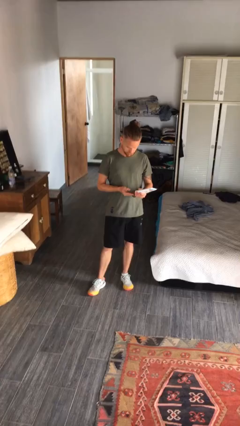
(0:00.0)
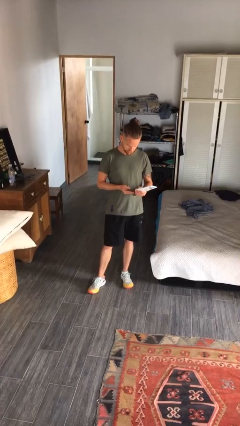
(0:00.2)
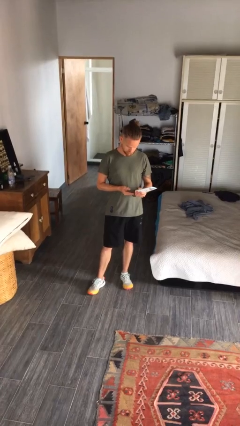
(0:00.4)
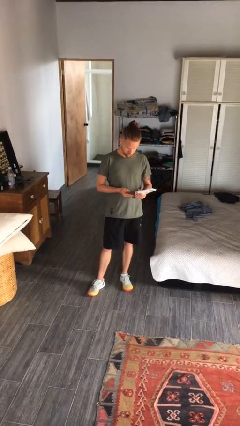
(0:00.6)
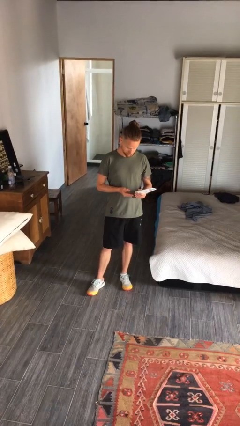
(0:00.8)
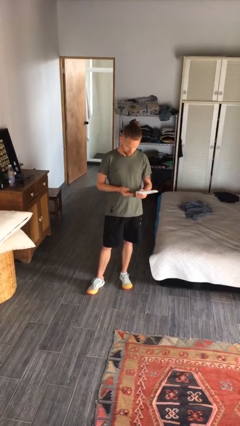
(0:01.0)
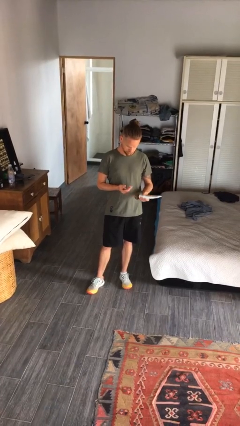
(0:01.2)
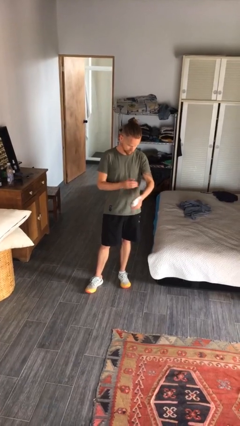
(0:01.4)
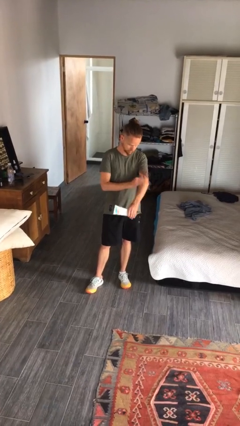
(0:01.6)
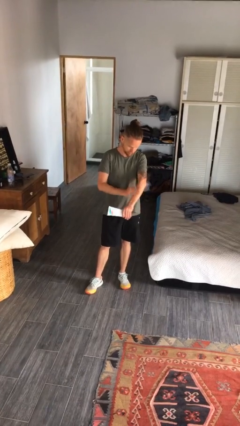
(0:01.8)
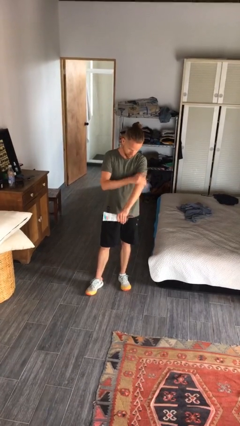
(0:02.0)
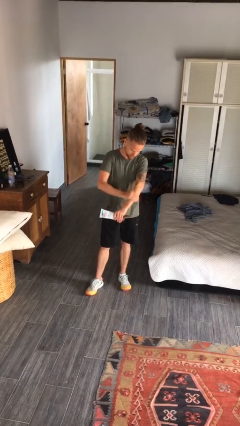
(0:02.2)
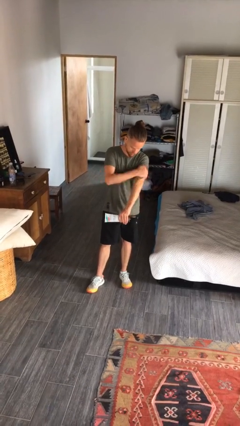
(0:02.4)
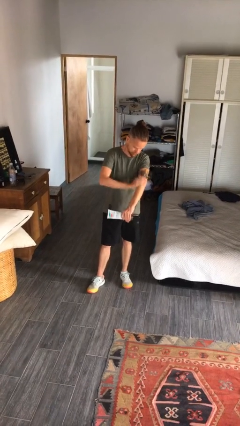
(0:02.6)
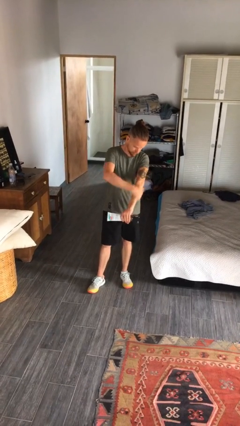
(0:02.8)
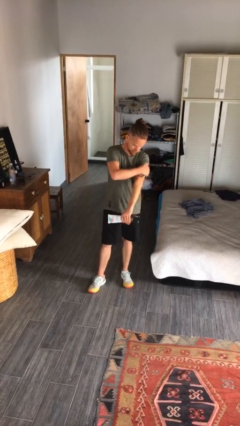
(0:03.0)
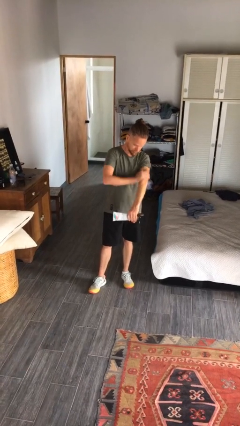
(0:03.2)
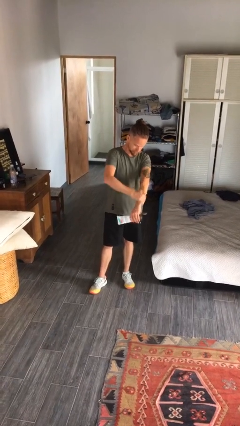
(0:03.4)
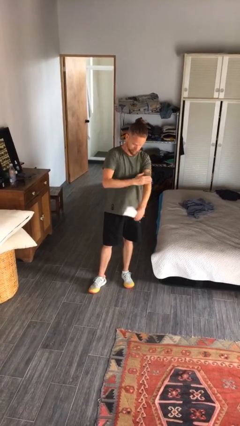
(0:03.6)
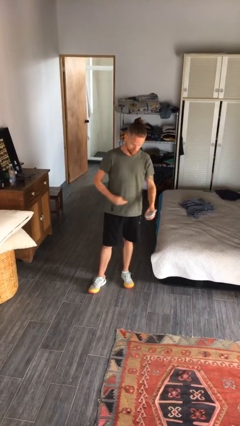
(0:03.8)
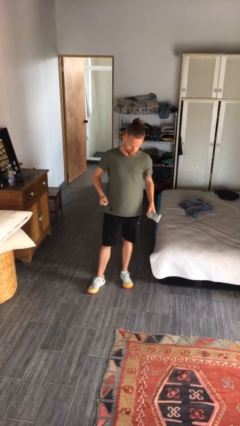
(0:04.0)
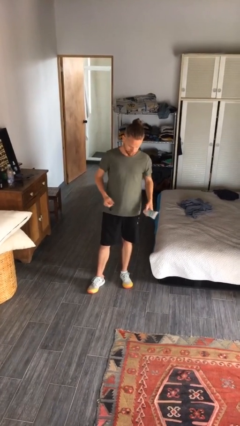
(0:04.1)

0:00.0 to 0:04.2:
person applies sunscreen

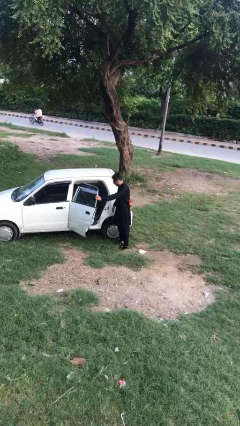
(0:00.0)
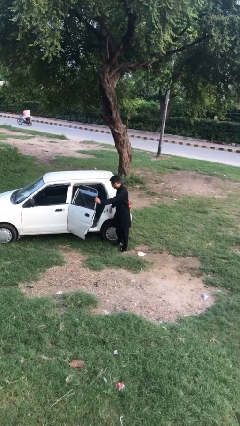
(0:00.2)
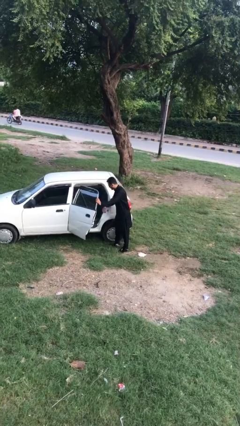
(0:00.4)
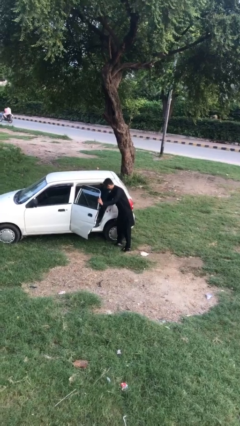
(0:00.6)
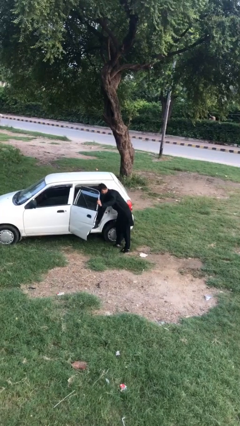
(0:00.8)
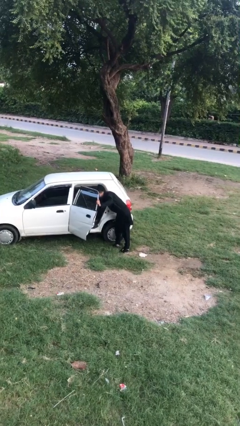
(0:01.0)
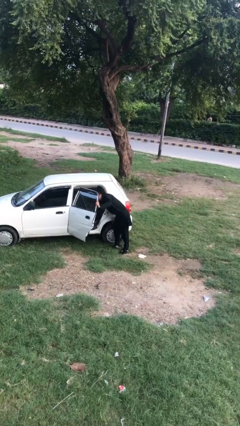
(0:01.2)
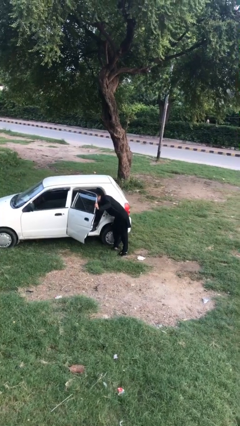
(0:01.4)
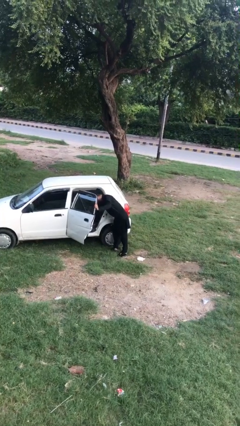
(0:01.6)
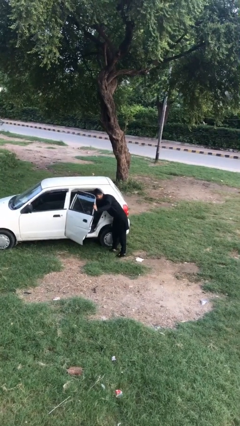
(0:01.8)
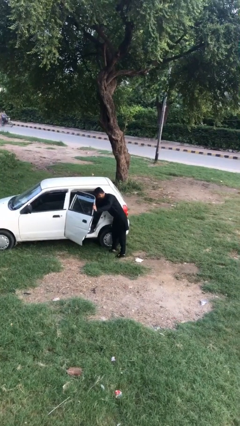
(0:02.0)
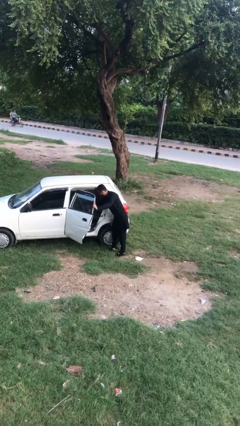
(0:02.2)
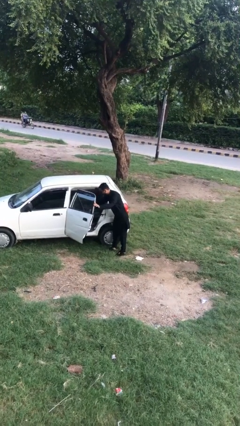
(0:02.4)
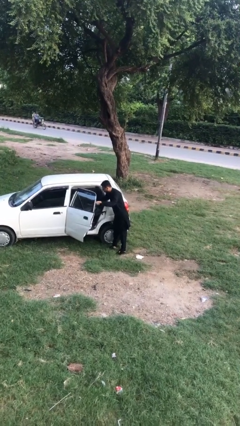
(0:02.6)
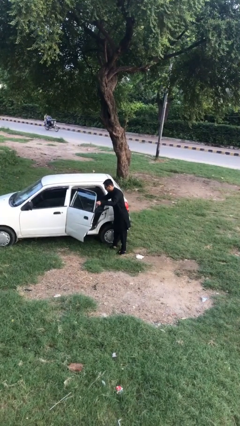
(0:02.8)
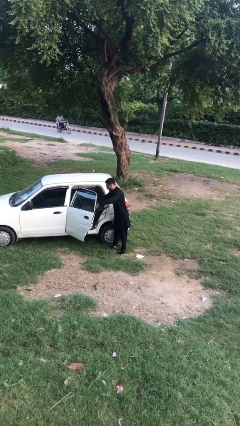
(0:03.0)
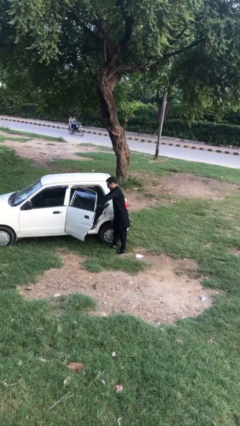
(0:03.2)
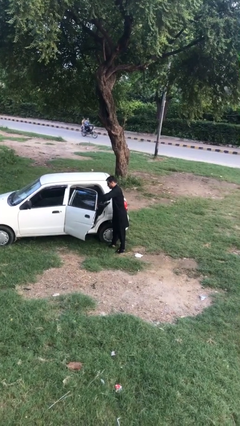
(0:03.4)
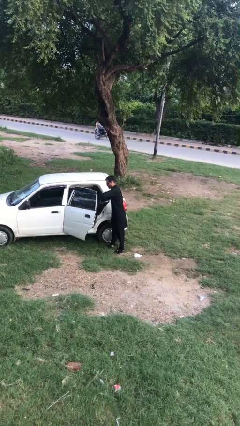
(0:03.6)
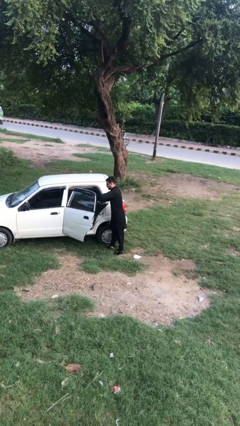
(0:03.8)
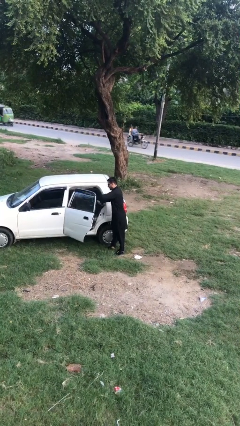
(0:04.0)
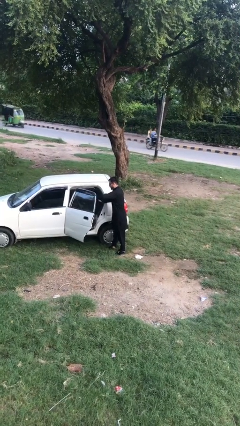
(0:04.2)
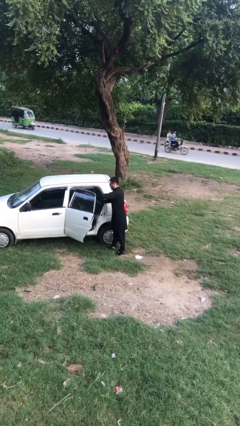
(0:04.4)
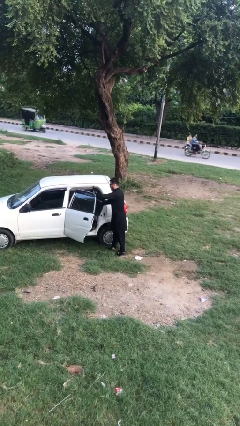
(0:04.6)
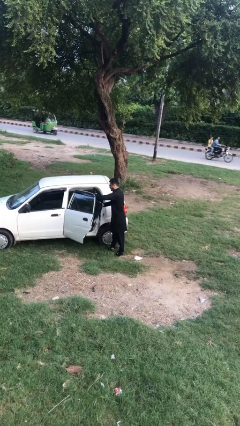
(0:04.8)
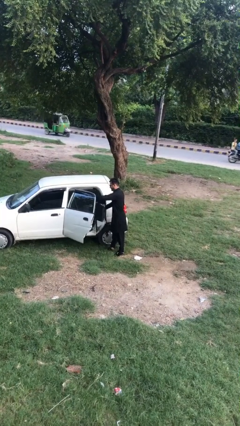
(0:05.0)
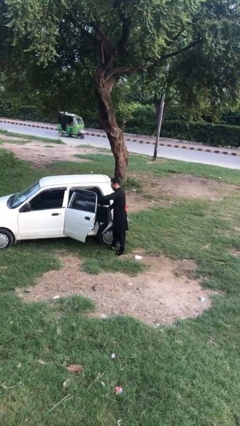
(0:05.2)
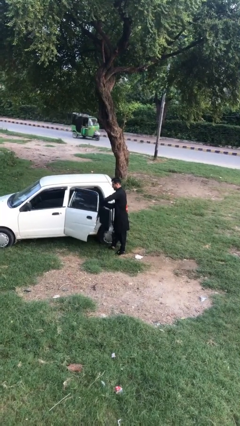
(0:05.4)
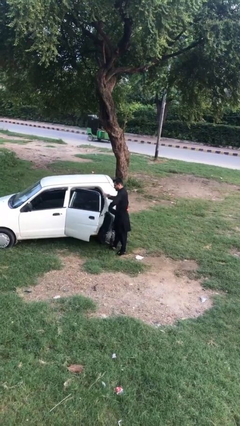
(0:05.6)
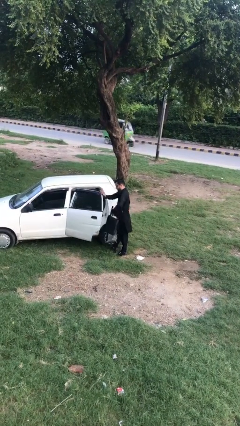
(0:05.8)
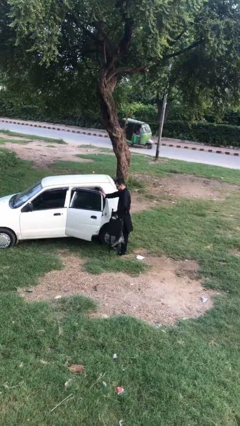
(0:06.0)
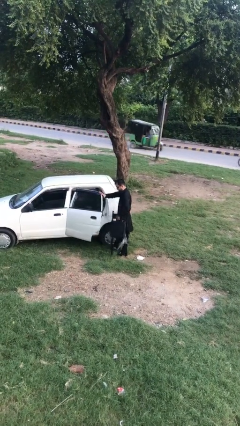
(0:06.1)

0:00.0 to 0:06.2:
person unloads car

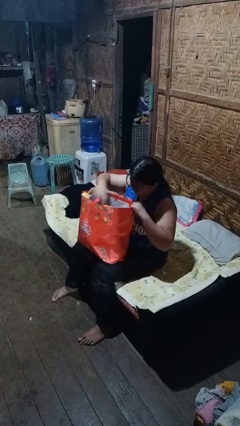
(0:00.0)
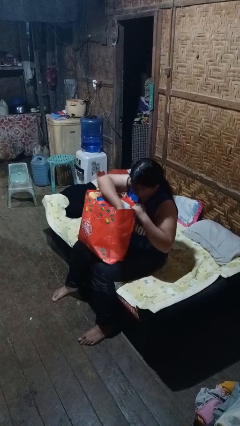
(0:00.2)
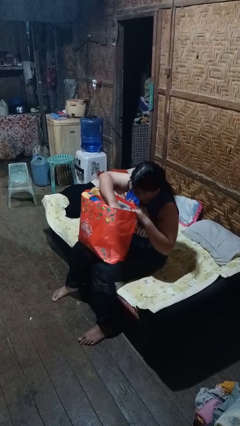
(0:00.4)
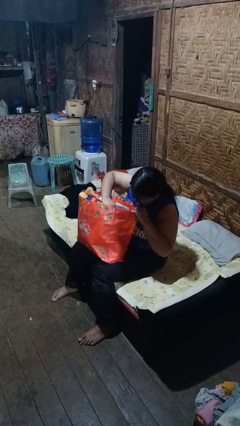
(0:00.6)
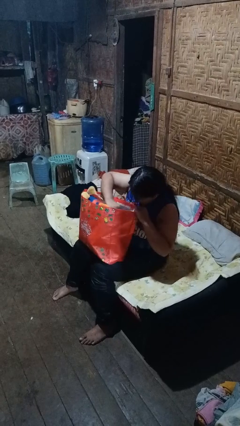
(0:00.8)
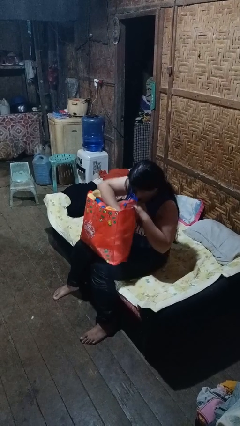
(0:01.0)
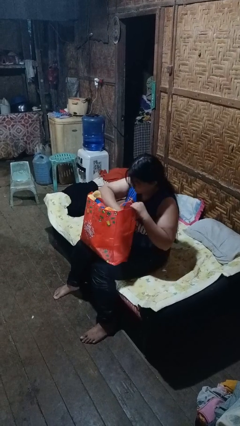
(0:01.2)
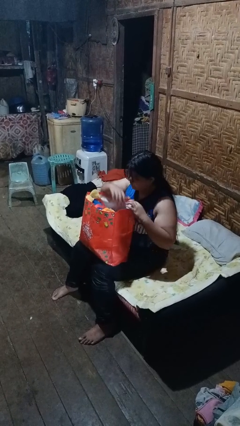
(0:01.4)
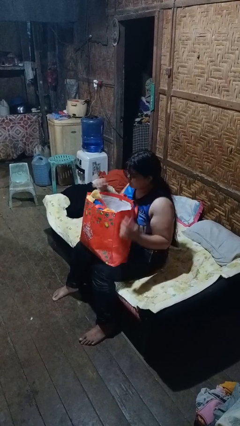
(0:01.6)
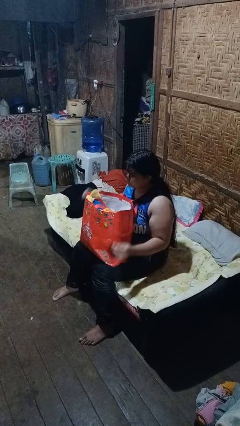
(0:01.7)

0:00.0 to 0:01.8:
person searches in bag

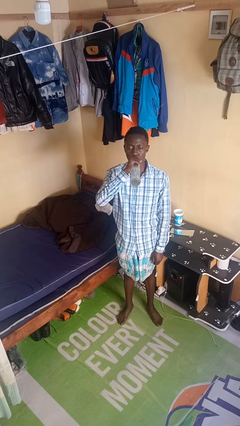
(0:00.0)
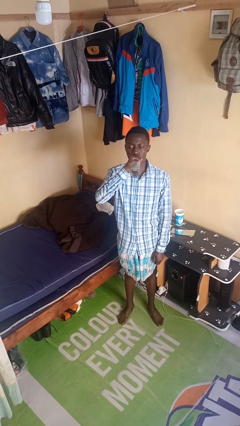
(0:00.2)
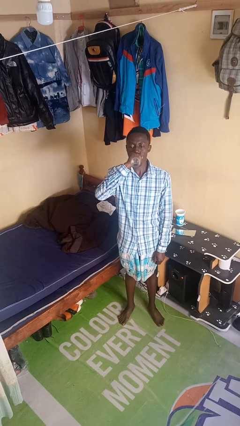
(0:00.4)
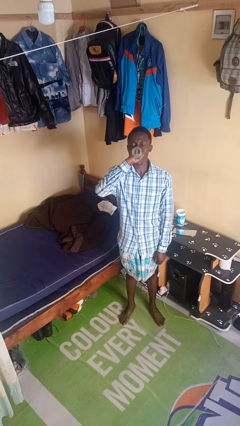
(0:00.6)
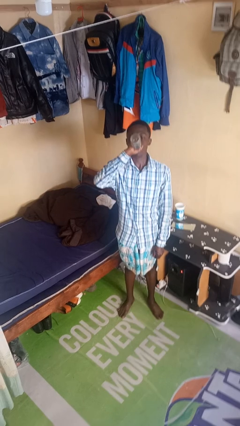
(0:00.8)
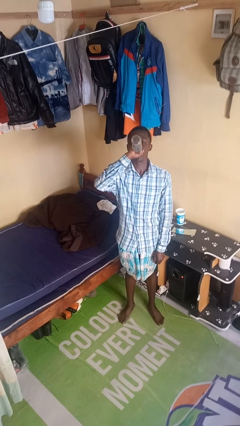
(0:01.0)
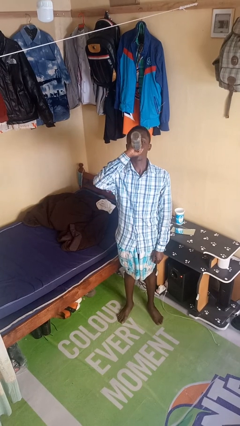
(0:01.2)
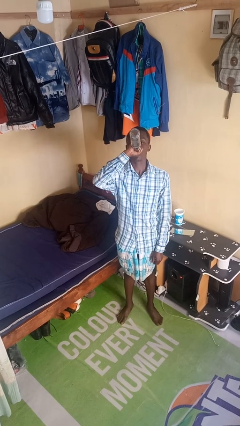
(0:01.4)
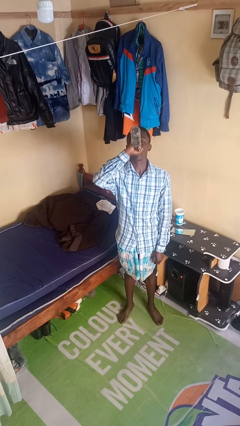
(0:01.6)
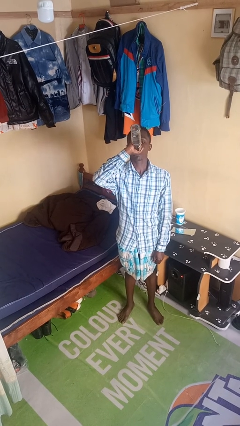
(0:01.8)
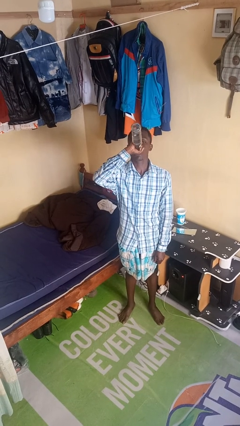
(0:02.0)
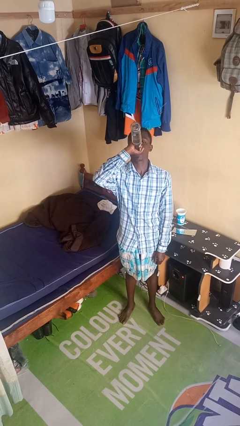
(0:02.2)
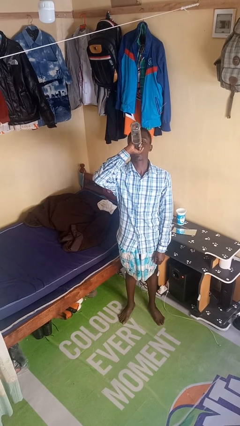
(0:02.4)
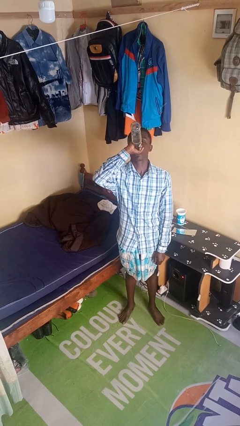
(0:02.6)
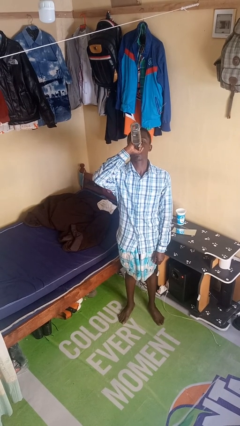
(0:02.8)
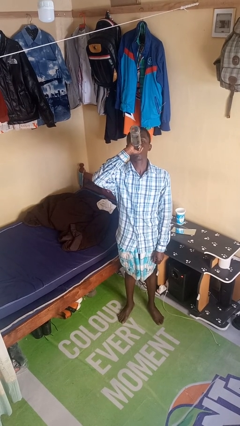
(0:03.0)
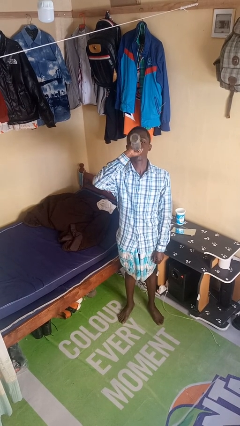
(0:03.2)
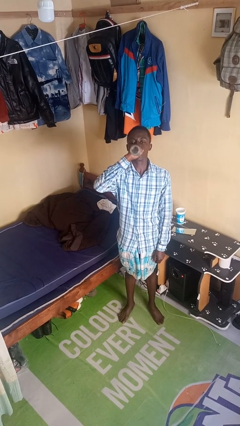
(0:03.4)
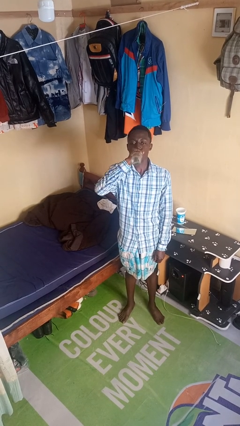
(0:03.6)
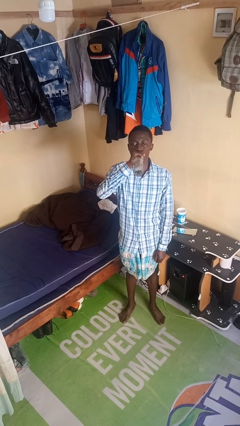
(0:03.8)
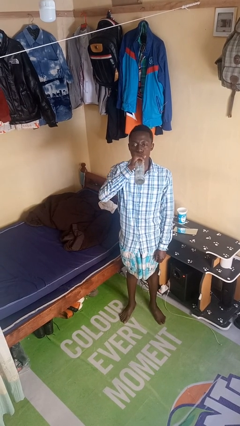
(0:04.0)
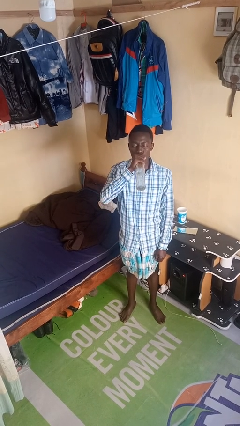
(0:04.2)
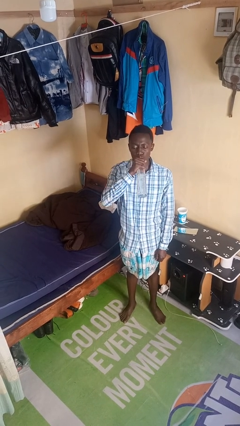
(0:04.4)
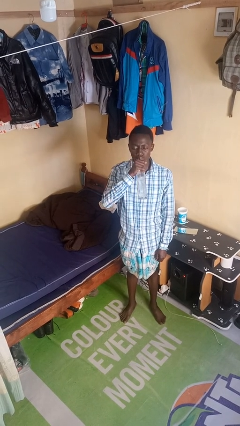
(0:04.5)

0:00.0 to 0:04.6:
person drinks from bottle

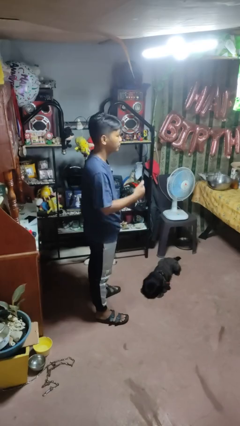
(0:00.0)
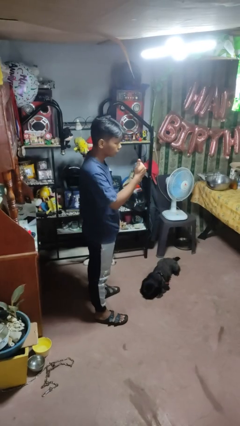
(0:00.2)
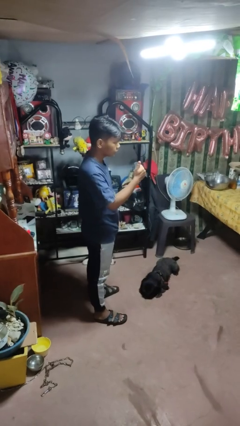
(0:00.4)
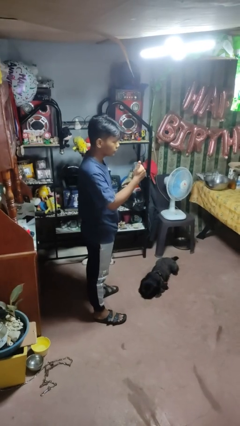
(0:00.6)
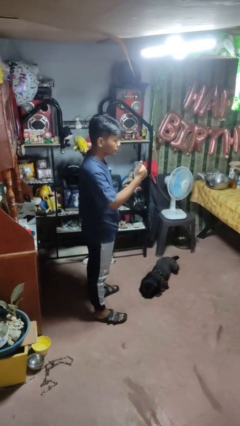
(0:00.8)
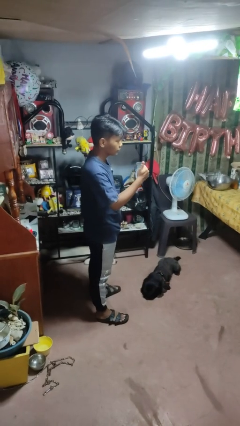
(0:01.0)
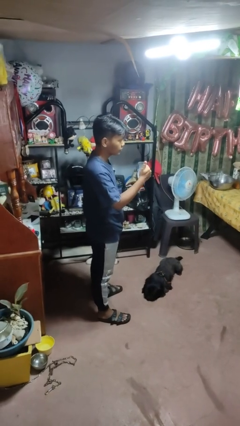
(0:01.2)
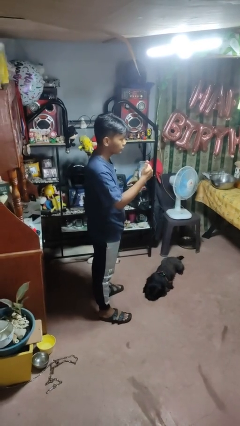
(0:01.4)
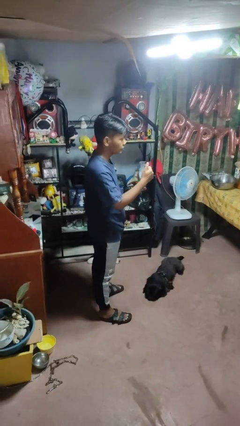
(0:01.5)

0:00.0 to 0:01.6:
person gestures thumbs up
